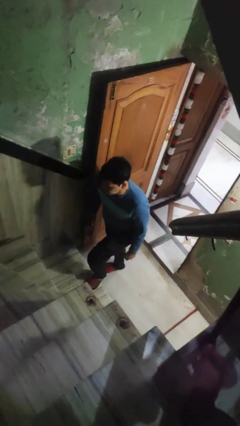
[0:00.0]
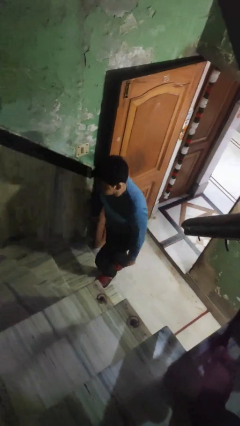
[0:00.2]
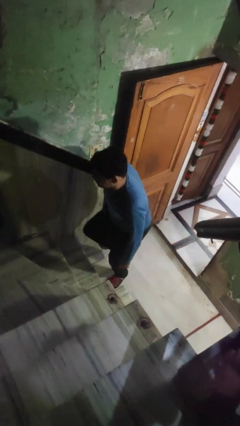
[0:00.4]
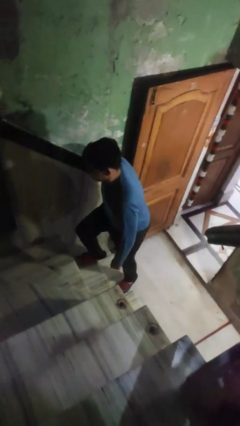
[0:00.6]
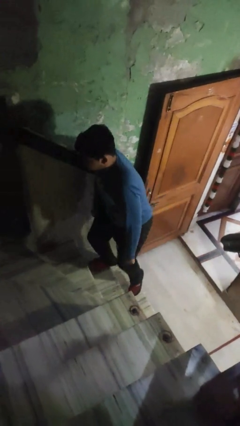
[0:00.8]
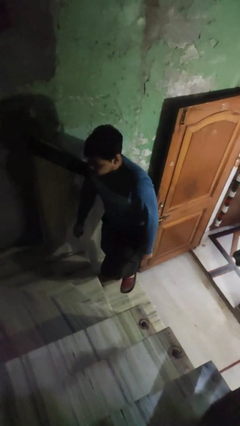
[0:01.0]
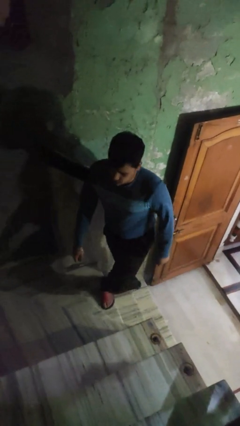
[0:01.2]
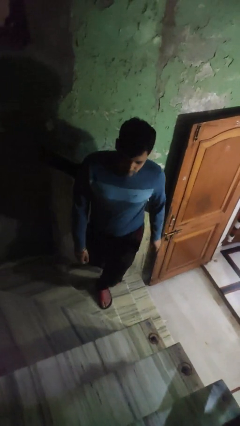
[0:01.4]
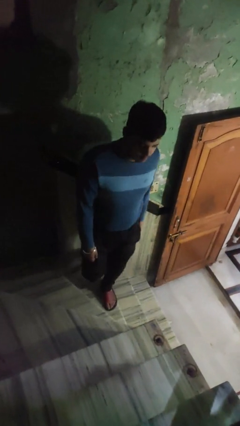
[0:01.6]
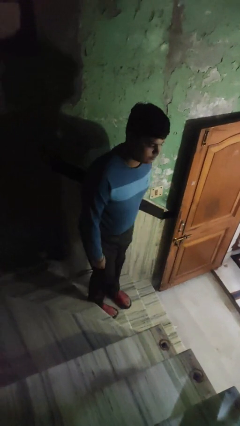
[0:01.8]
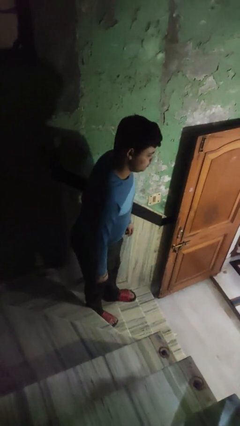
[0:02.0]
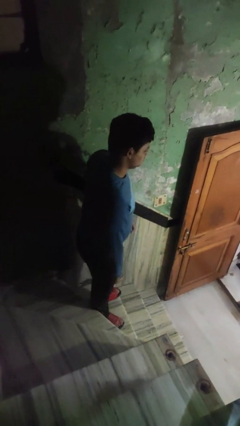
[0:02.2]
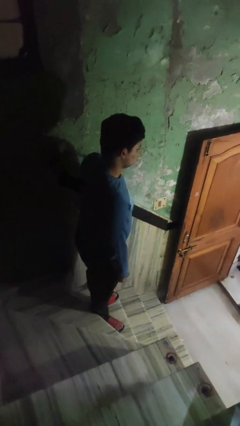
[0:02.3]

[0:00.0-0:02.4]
person climbs up stairs

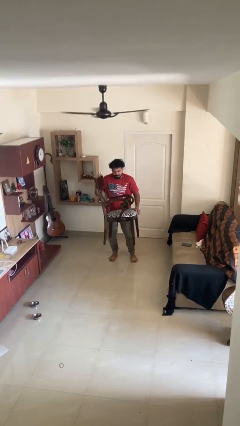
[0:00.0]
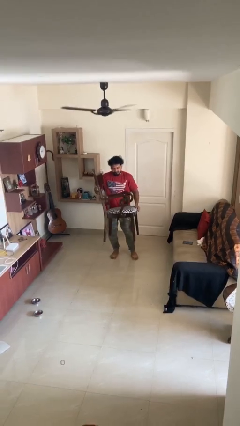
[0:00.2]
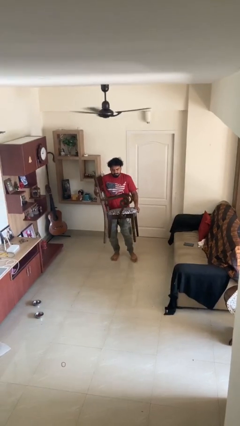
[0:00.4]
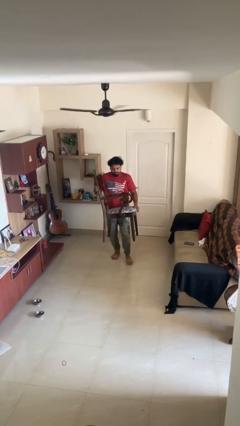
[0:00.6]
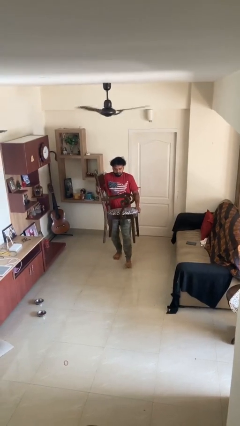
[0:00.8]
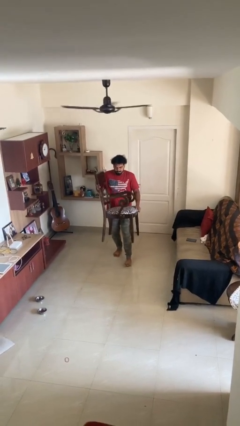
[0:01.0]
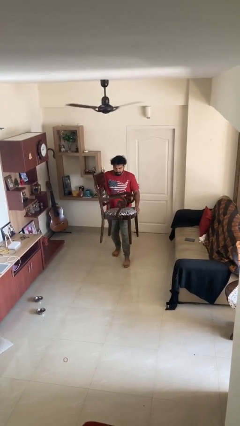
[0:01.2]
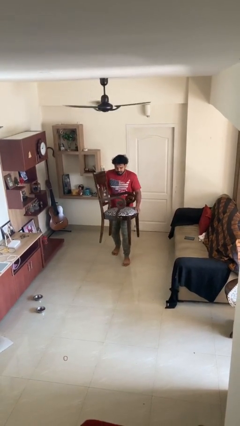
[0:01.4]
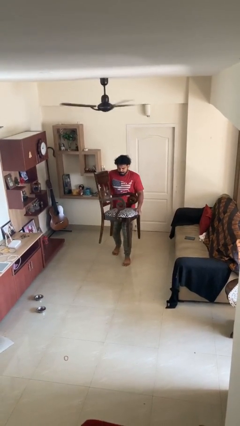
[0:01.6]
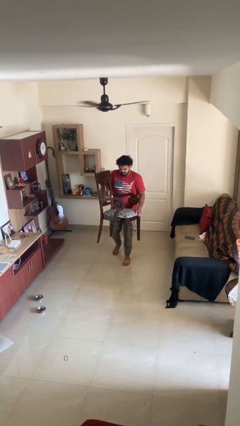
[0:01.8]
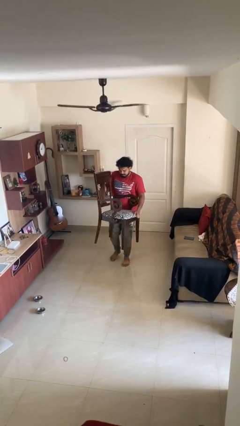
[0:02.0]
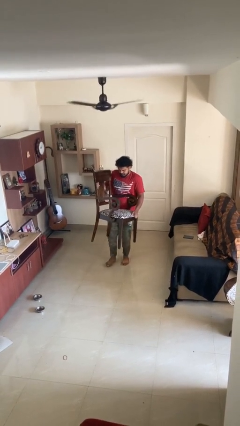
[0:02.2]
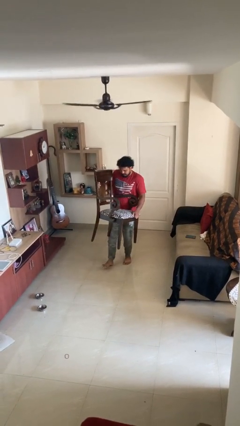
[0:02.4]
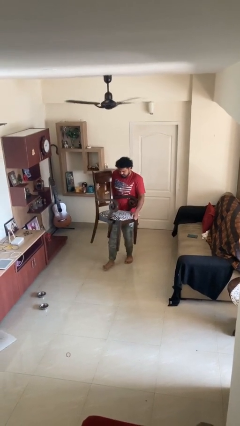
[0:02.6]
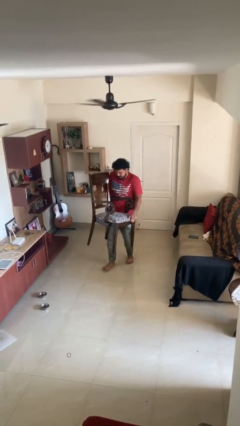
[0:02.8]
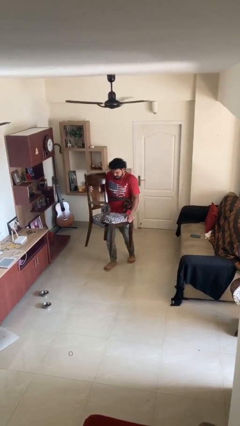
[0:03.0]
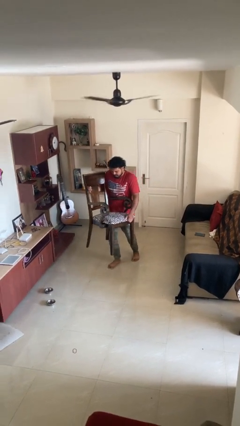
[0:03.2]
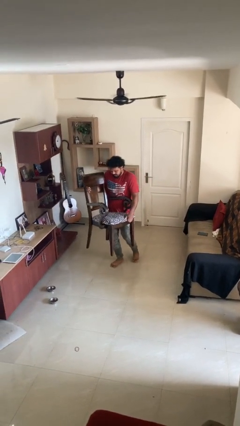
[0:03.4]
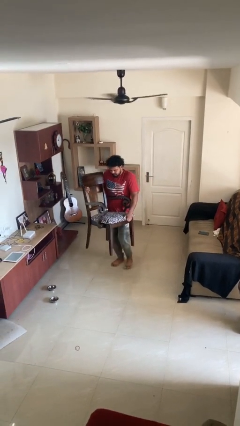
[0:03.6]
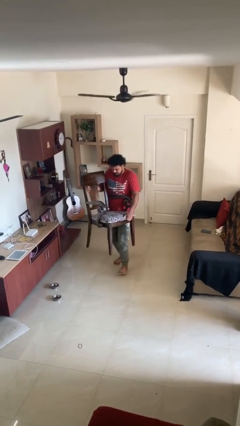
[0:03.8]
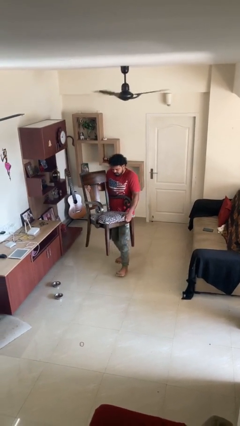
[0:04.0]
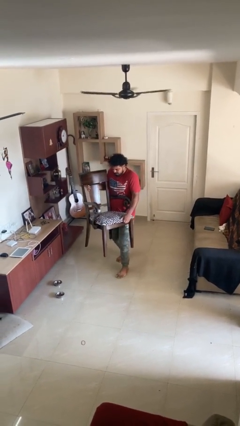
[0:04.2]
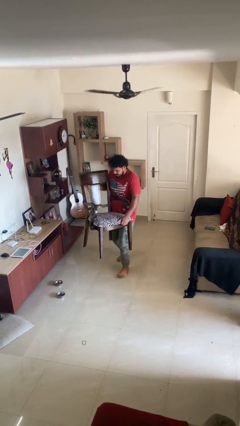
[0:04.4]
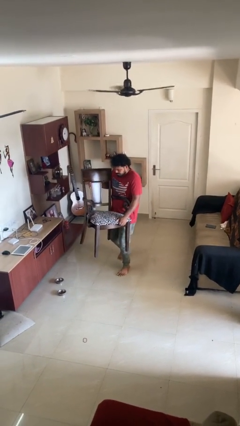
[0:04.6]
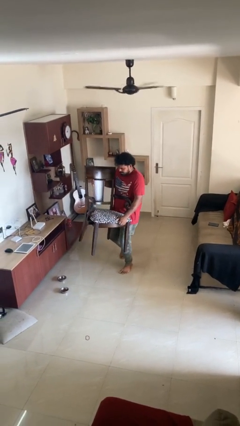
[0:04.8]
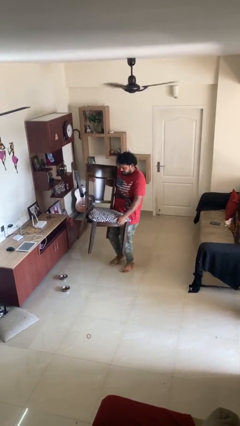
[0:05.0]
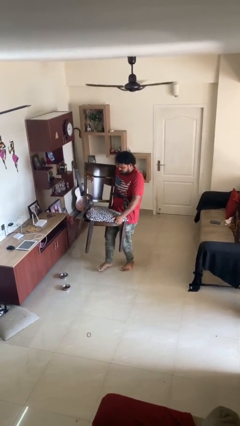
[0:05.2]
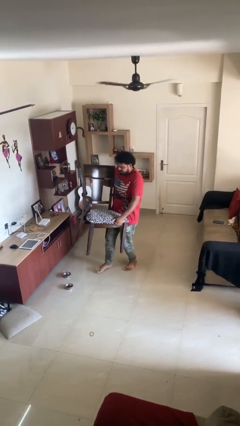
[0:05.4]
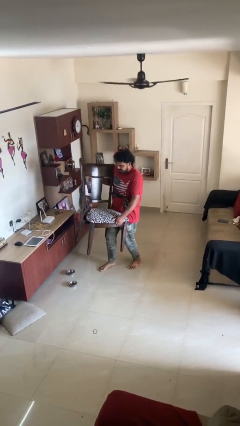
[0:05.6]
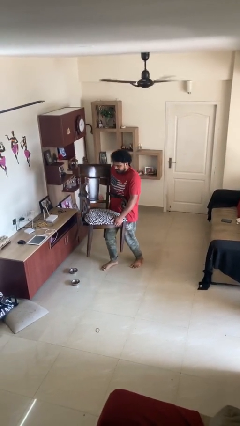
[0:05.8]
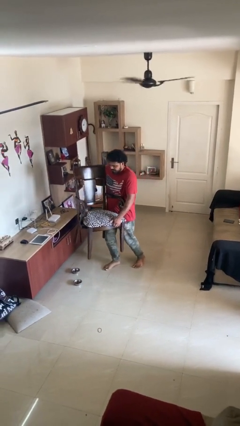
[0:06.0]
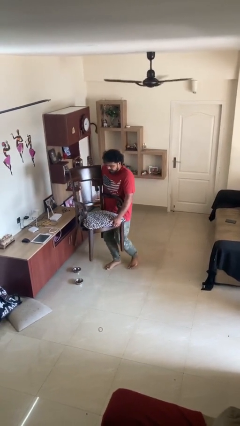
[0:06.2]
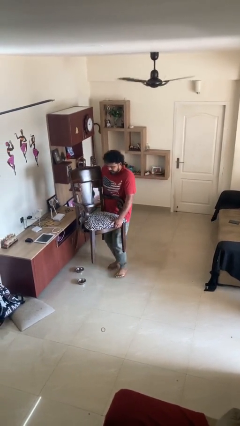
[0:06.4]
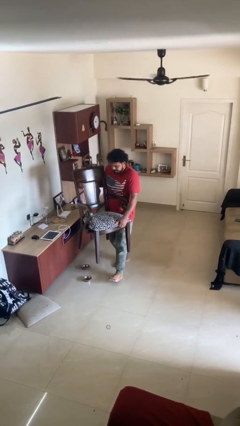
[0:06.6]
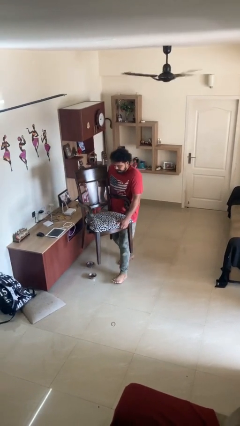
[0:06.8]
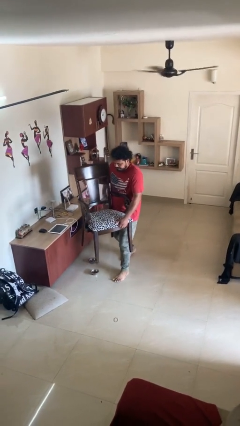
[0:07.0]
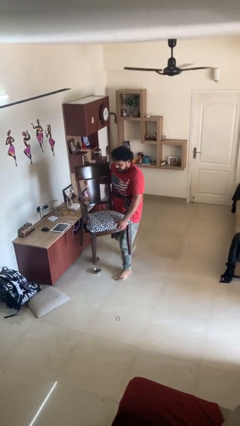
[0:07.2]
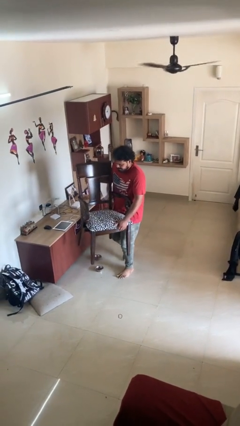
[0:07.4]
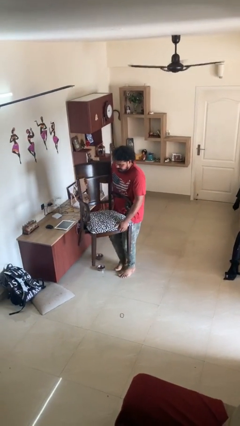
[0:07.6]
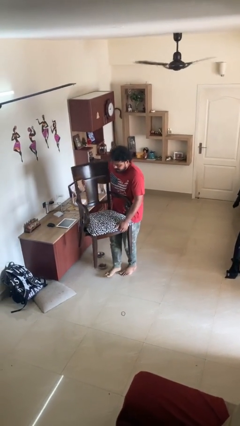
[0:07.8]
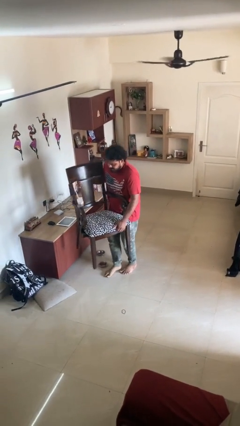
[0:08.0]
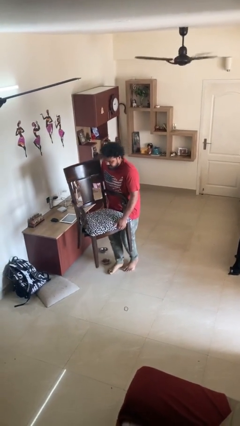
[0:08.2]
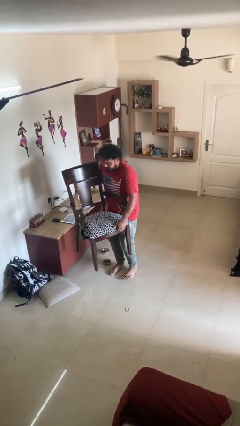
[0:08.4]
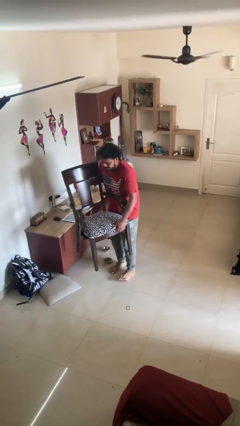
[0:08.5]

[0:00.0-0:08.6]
person carries heavy object

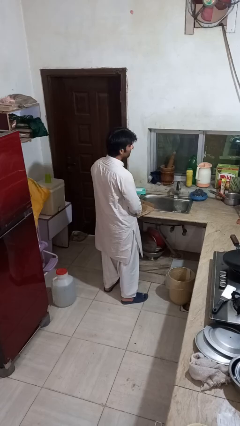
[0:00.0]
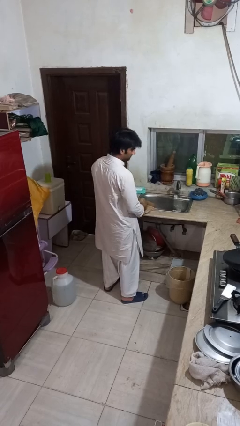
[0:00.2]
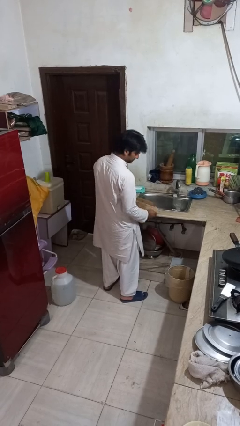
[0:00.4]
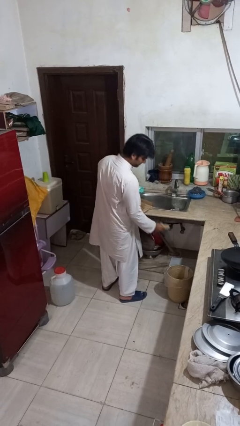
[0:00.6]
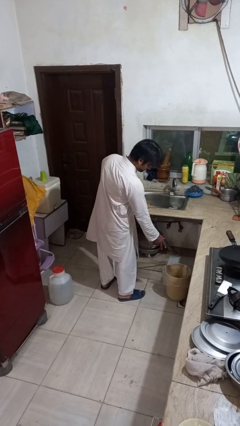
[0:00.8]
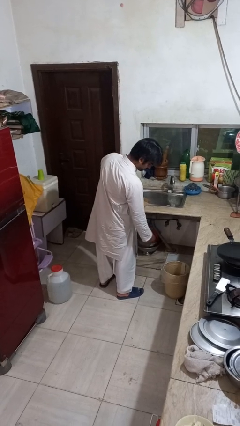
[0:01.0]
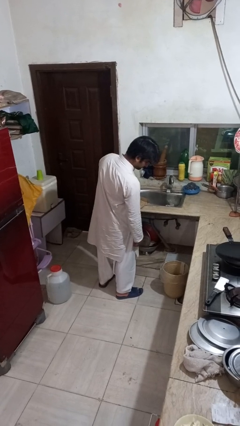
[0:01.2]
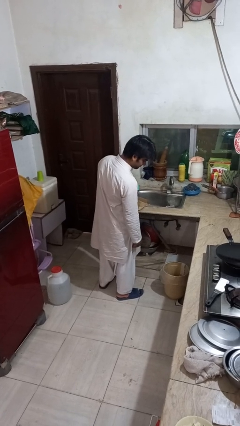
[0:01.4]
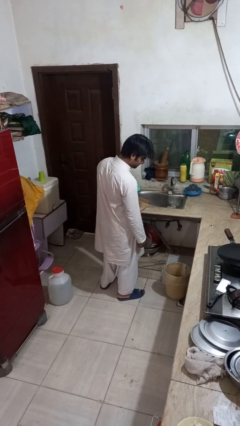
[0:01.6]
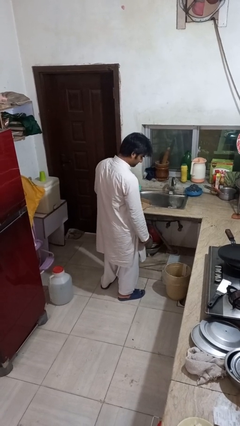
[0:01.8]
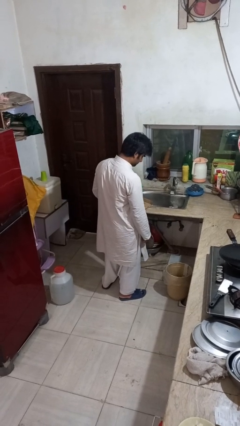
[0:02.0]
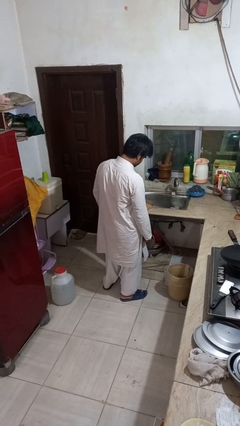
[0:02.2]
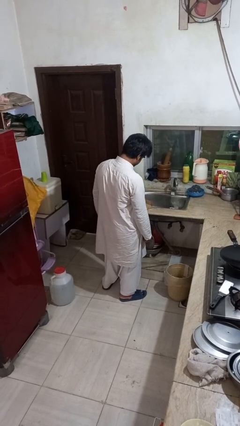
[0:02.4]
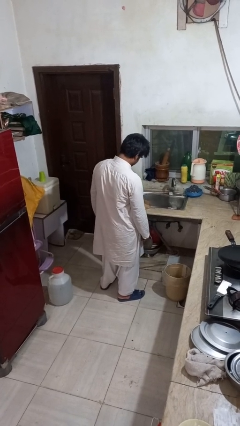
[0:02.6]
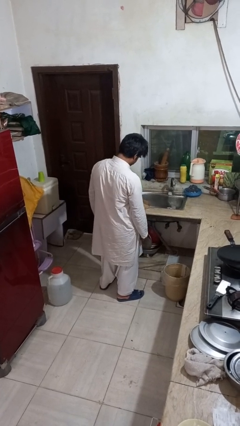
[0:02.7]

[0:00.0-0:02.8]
person discards trash

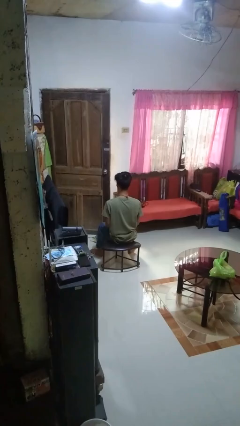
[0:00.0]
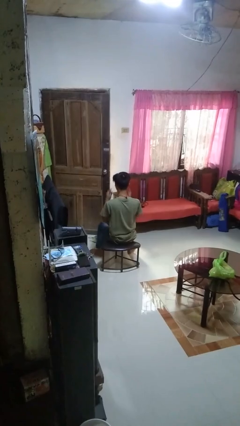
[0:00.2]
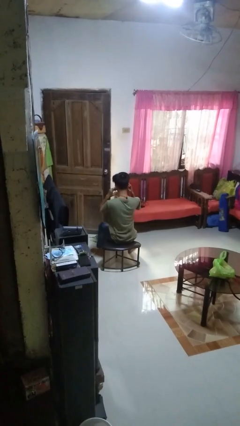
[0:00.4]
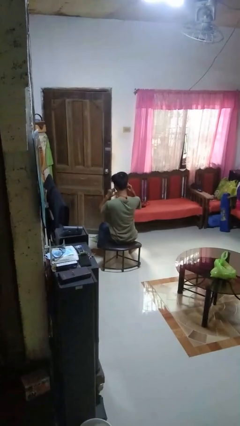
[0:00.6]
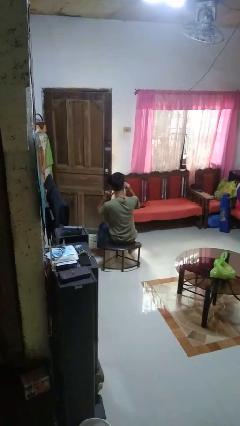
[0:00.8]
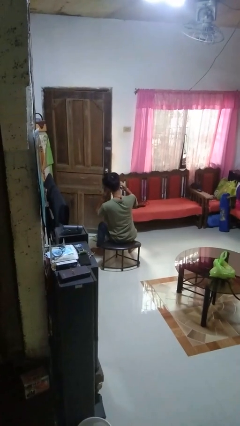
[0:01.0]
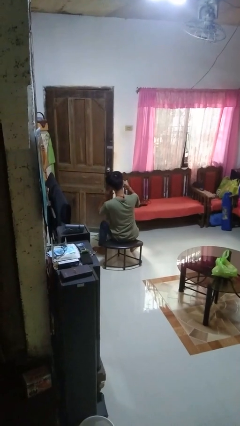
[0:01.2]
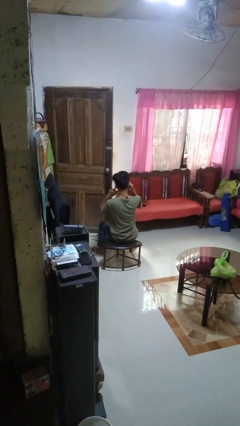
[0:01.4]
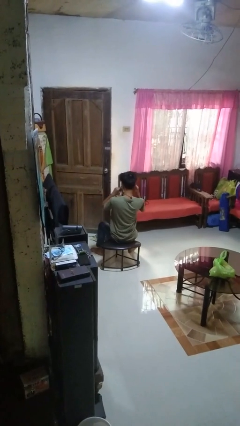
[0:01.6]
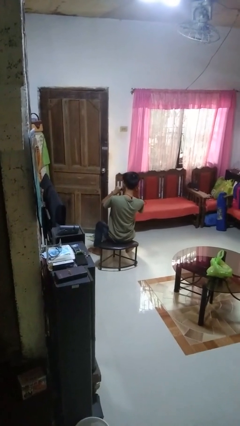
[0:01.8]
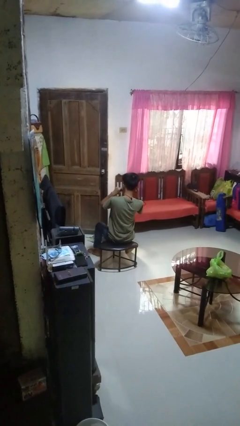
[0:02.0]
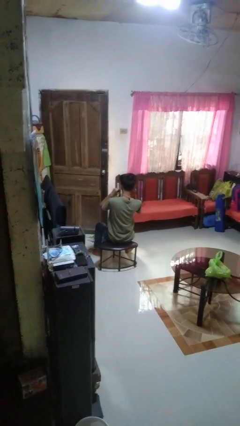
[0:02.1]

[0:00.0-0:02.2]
person puts fingers in ear

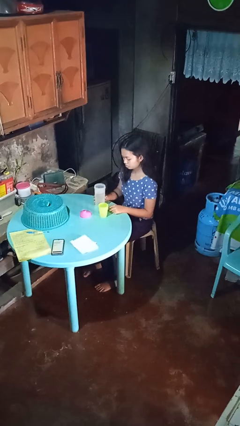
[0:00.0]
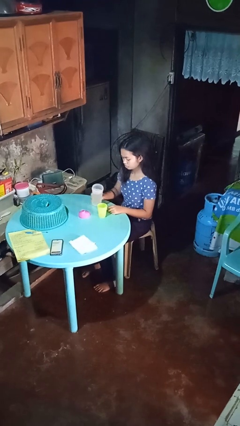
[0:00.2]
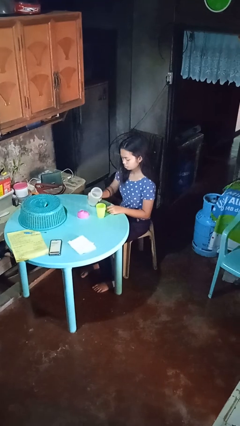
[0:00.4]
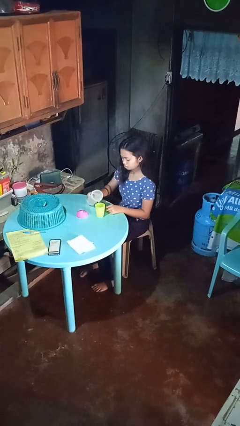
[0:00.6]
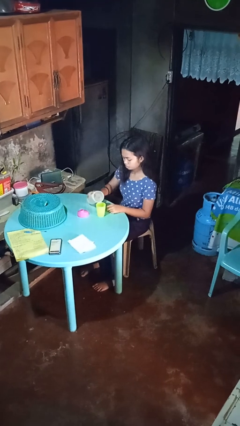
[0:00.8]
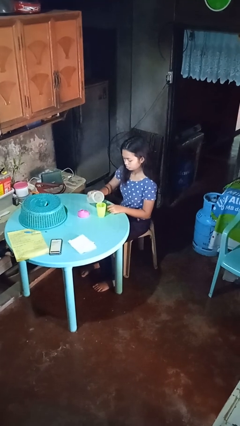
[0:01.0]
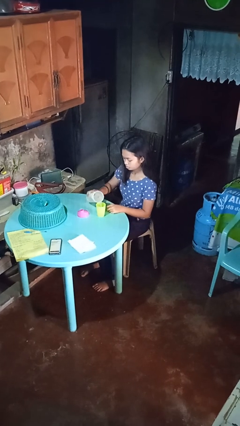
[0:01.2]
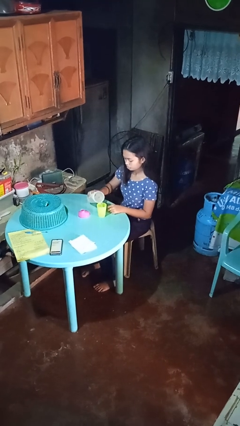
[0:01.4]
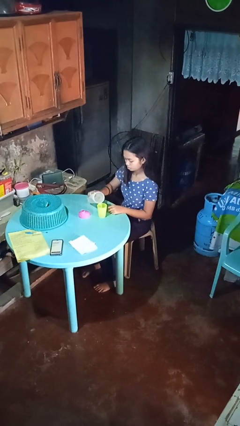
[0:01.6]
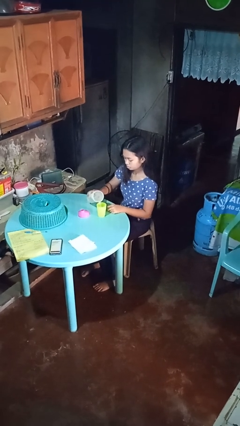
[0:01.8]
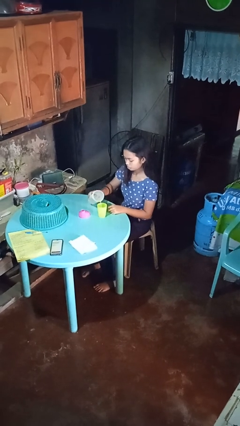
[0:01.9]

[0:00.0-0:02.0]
person pours liquid into cup
